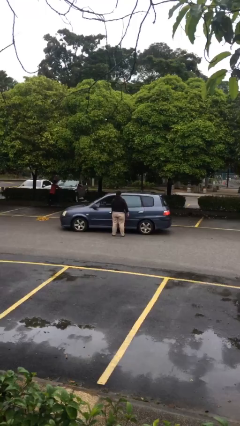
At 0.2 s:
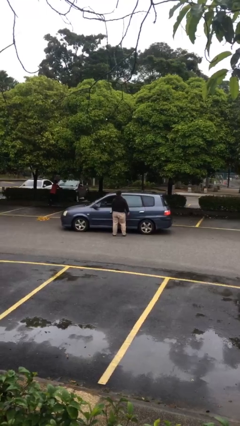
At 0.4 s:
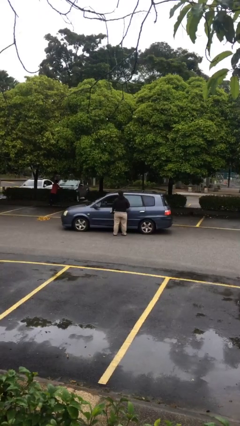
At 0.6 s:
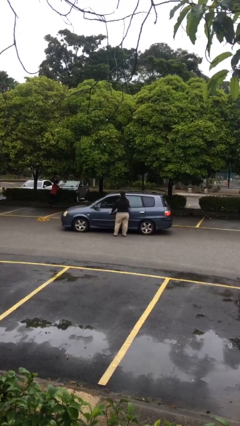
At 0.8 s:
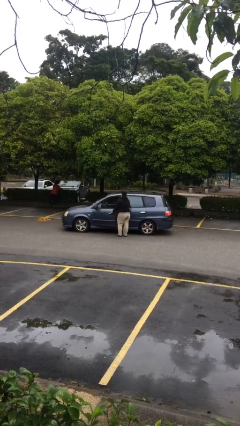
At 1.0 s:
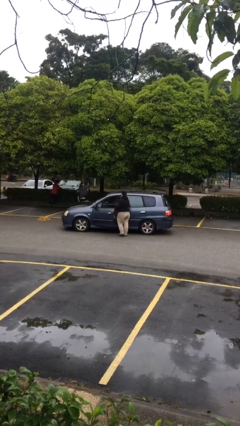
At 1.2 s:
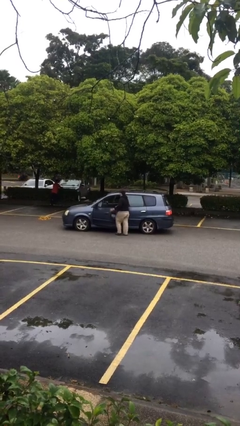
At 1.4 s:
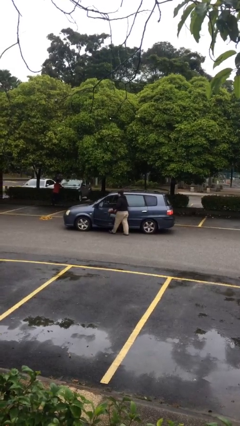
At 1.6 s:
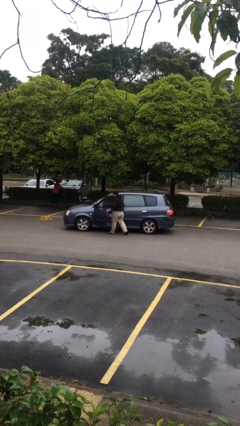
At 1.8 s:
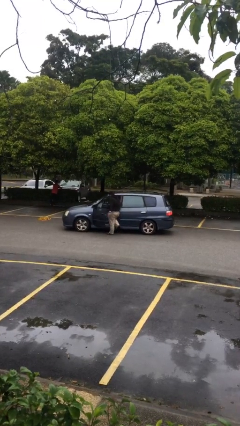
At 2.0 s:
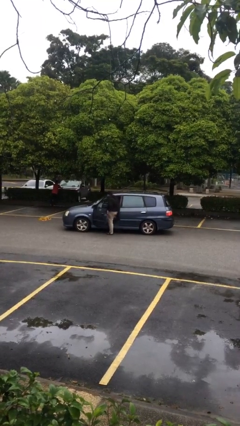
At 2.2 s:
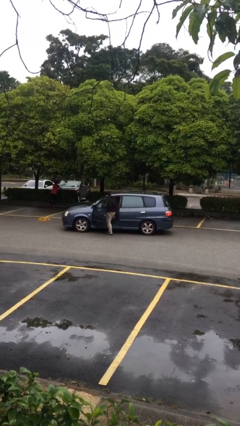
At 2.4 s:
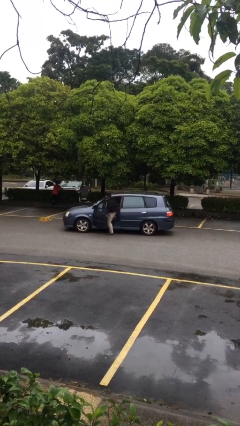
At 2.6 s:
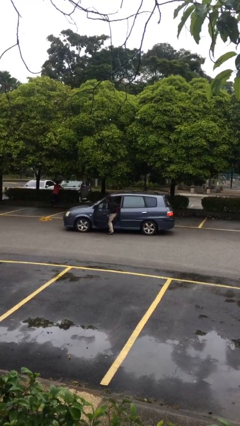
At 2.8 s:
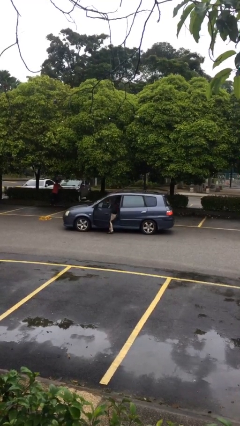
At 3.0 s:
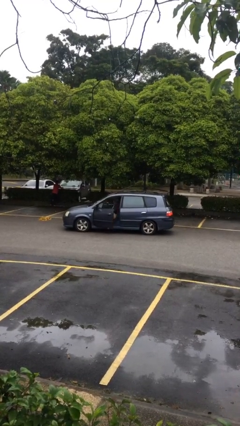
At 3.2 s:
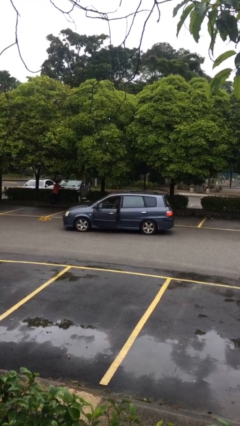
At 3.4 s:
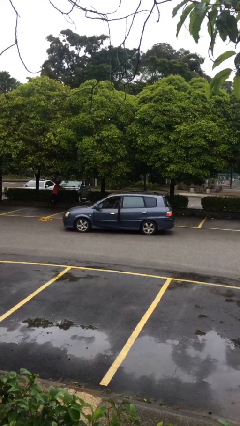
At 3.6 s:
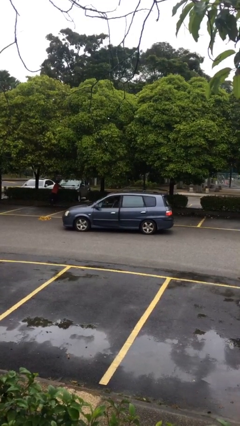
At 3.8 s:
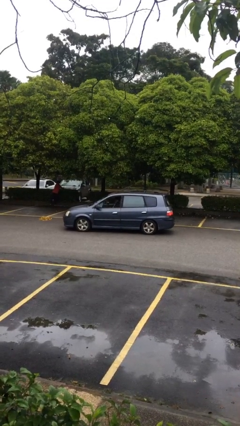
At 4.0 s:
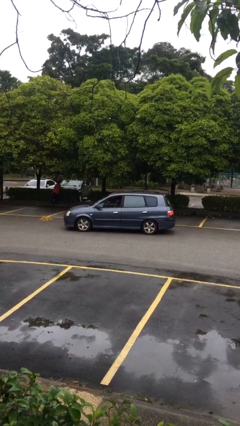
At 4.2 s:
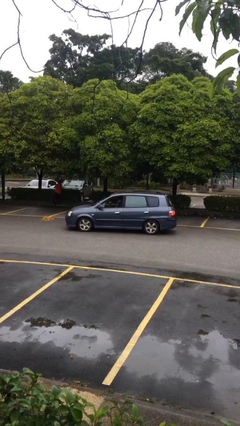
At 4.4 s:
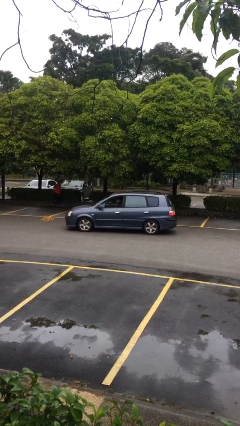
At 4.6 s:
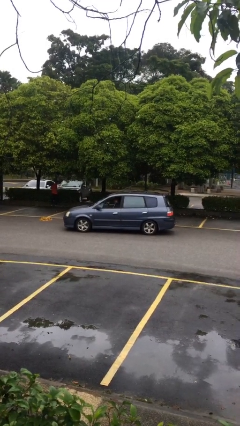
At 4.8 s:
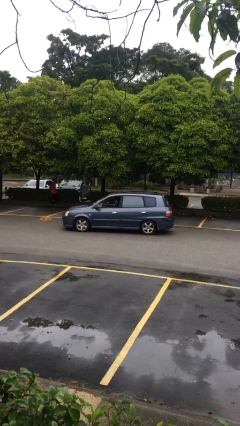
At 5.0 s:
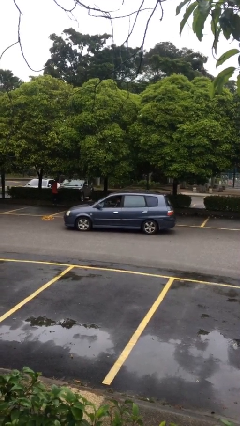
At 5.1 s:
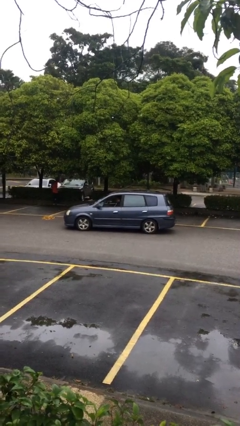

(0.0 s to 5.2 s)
car picks up person

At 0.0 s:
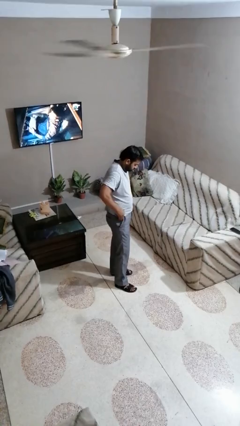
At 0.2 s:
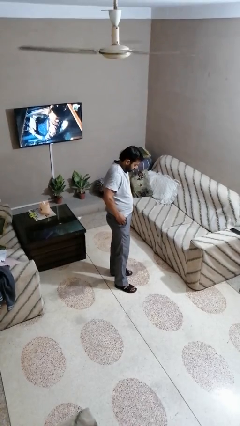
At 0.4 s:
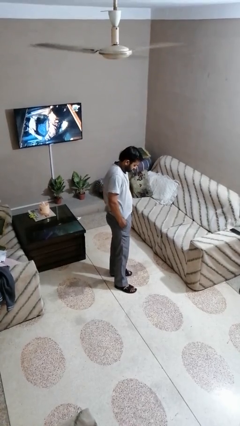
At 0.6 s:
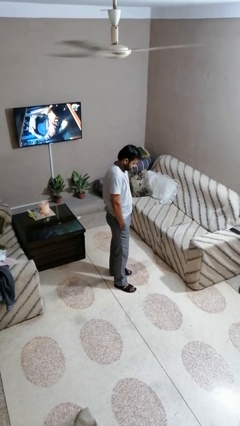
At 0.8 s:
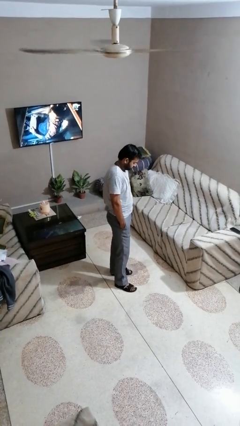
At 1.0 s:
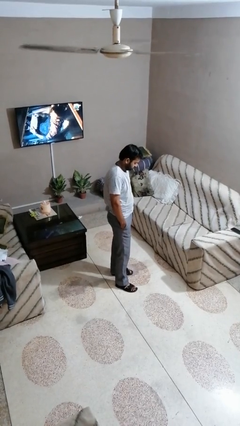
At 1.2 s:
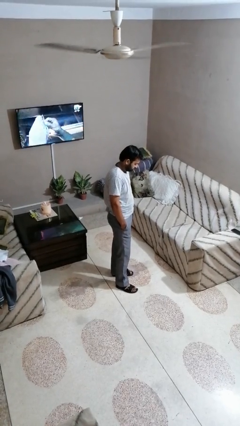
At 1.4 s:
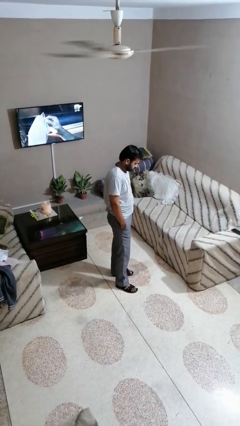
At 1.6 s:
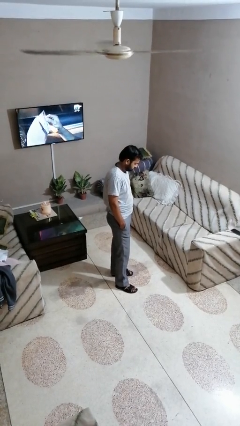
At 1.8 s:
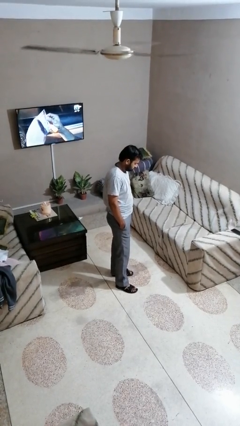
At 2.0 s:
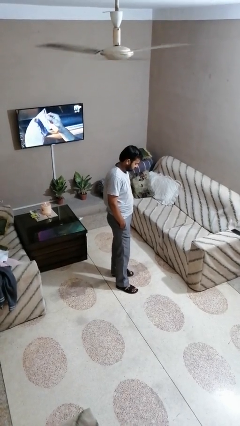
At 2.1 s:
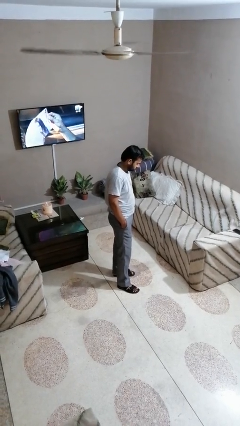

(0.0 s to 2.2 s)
person puts hands in back pockets

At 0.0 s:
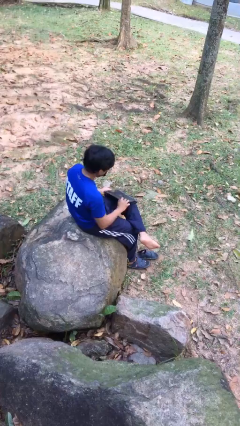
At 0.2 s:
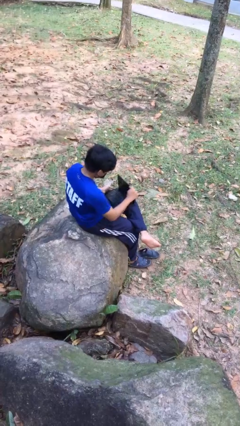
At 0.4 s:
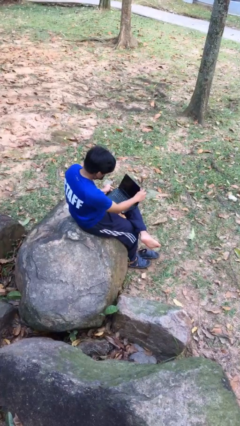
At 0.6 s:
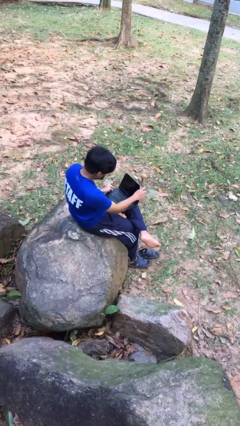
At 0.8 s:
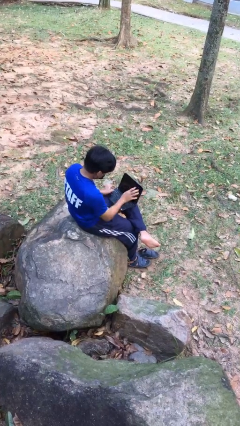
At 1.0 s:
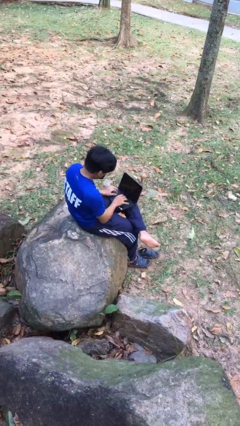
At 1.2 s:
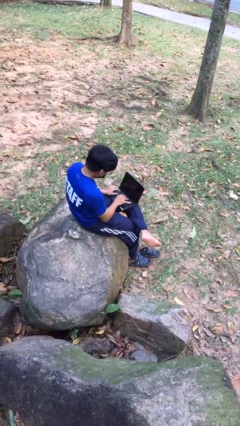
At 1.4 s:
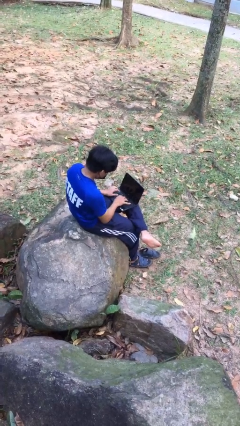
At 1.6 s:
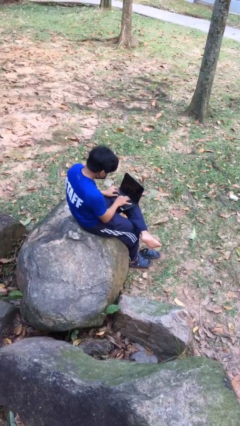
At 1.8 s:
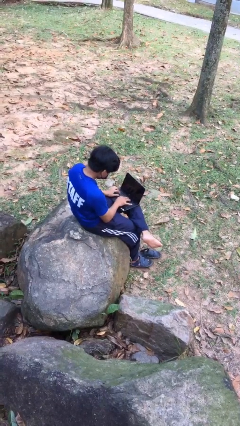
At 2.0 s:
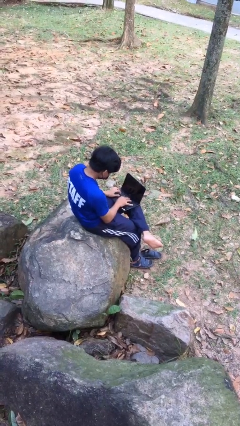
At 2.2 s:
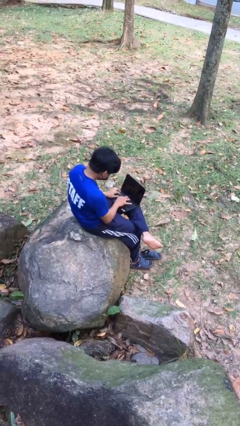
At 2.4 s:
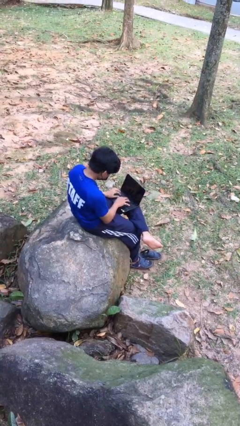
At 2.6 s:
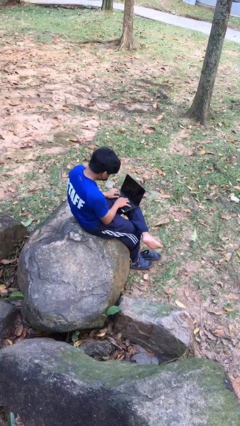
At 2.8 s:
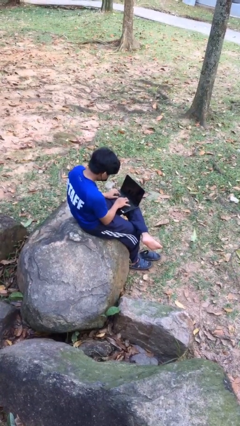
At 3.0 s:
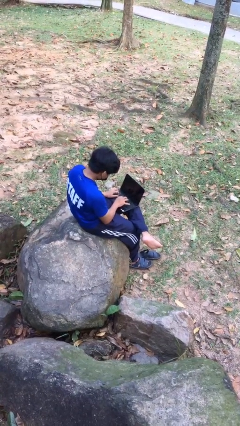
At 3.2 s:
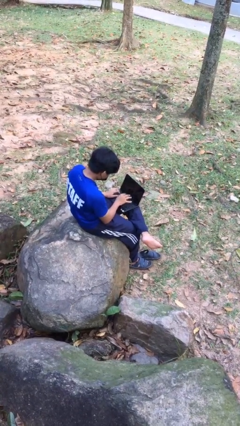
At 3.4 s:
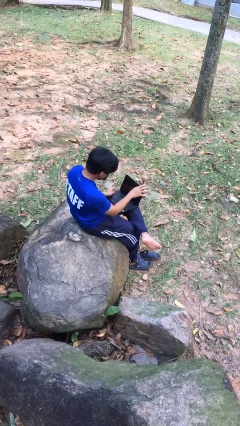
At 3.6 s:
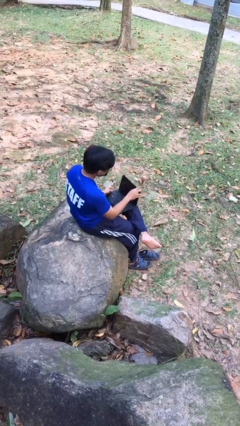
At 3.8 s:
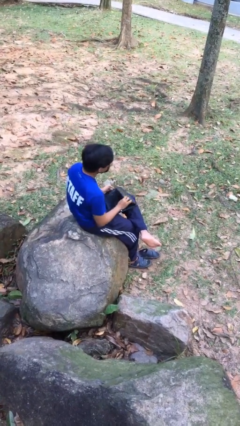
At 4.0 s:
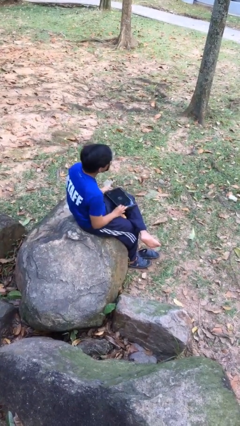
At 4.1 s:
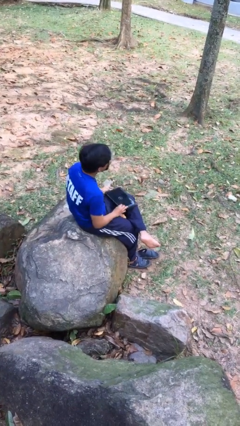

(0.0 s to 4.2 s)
person interacts with laptop

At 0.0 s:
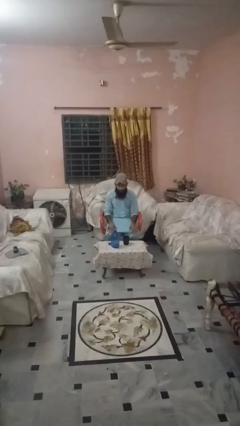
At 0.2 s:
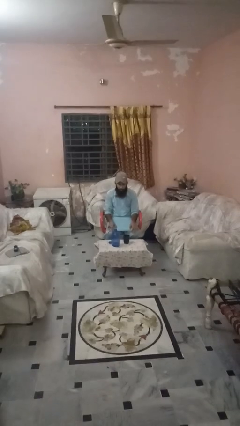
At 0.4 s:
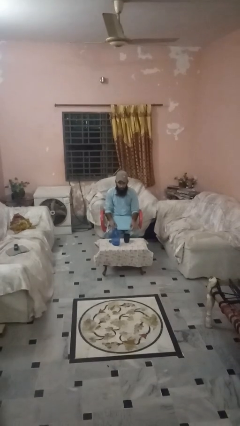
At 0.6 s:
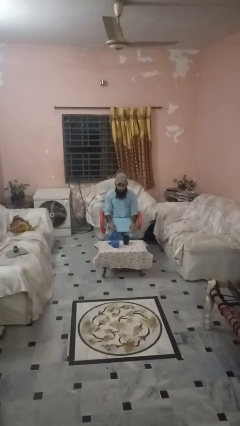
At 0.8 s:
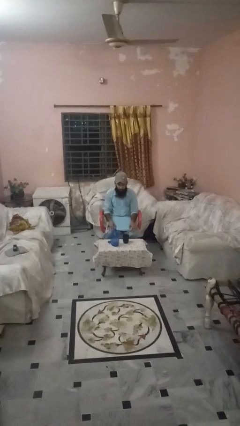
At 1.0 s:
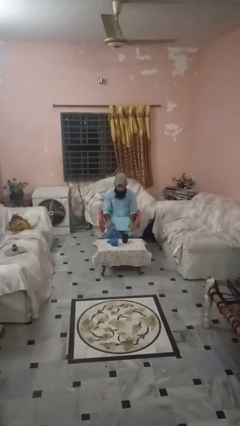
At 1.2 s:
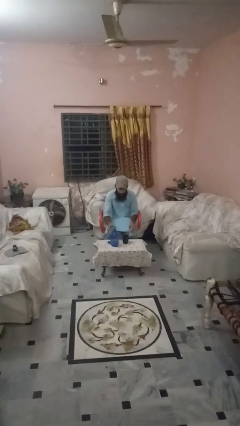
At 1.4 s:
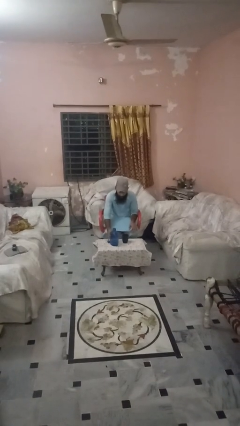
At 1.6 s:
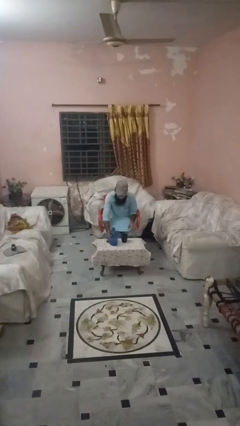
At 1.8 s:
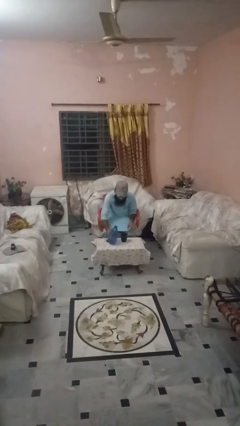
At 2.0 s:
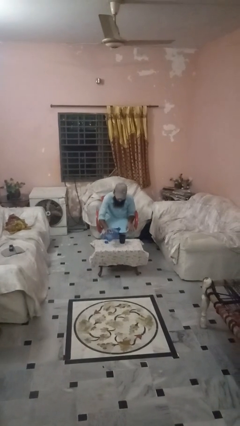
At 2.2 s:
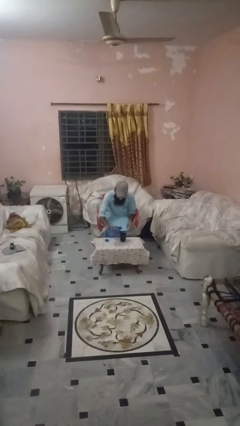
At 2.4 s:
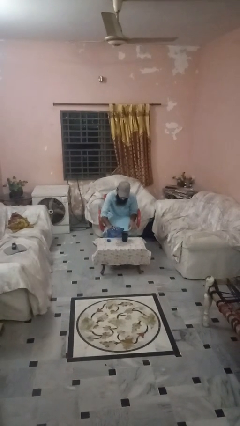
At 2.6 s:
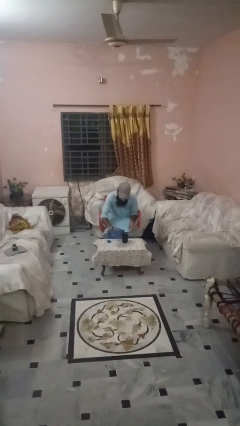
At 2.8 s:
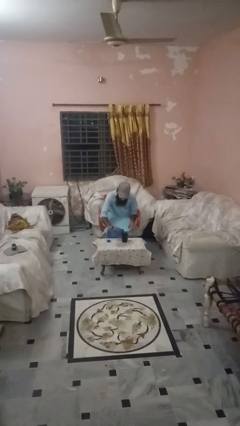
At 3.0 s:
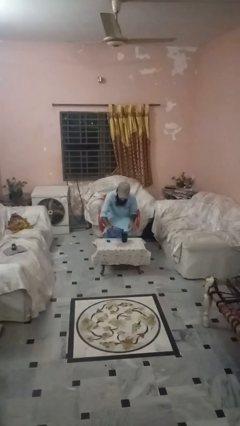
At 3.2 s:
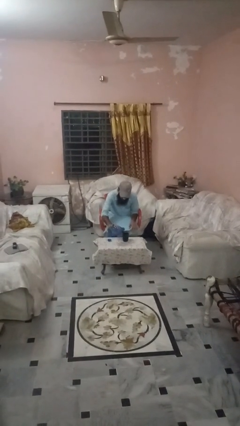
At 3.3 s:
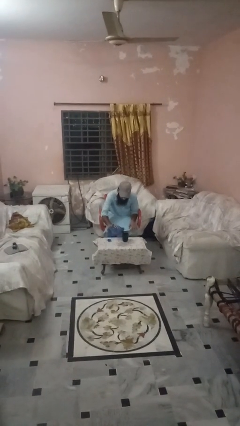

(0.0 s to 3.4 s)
person pours liquid into cup

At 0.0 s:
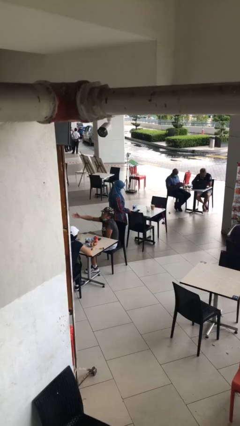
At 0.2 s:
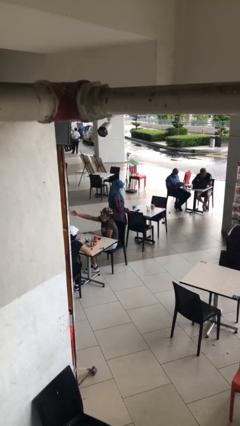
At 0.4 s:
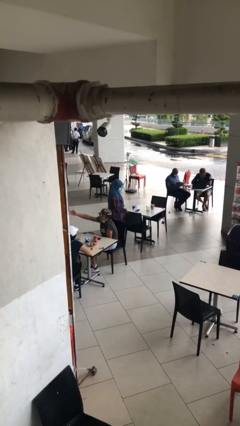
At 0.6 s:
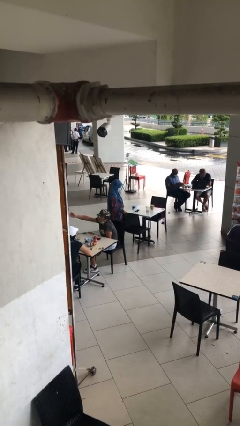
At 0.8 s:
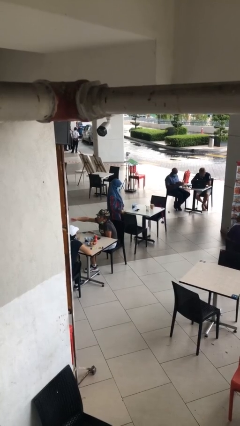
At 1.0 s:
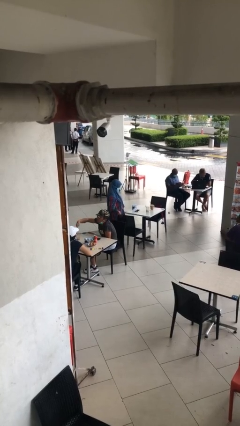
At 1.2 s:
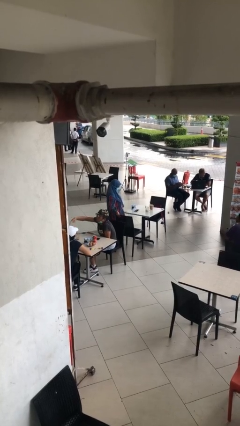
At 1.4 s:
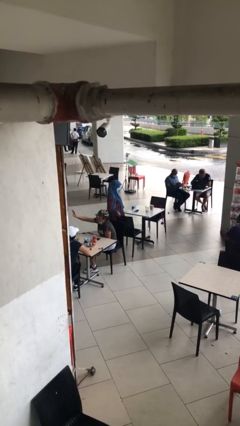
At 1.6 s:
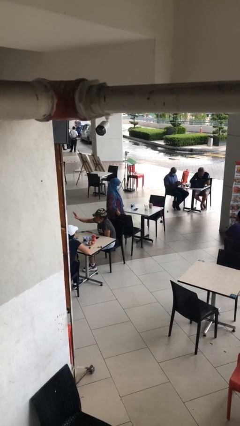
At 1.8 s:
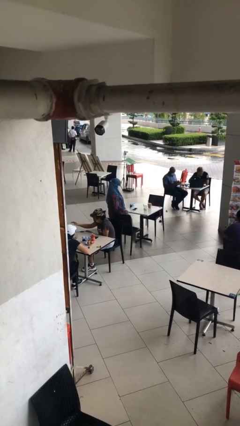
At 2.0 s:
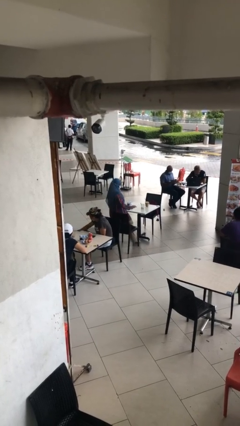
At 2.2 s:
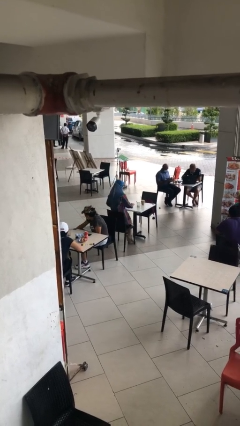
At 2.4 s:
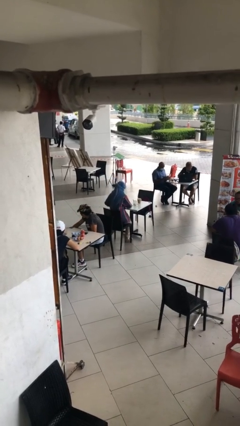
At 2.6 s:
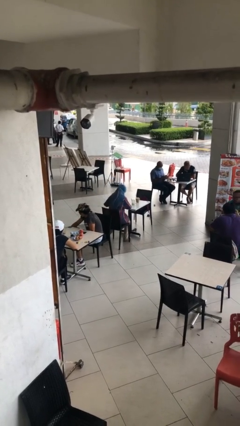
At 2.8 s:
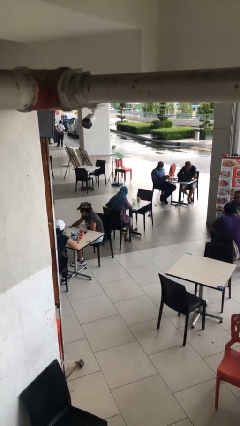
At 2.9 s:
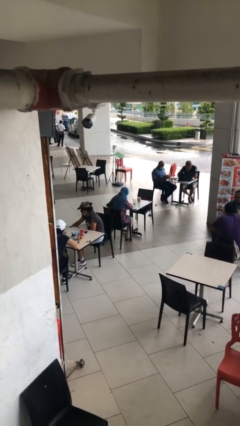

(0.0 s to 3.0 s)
person sits down
